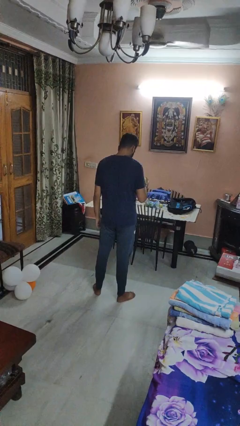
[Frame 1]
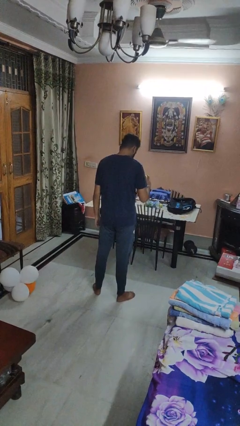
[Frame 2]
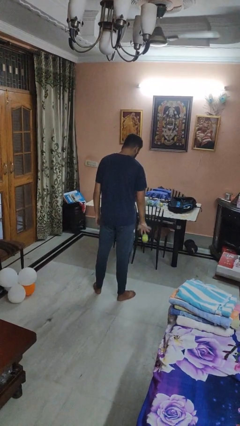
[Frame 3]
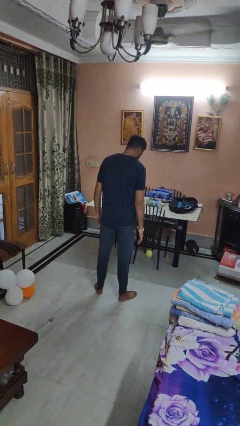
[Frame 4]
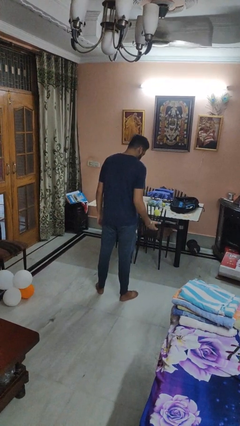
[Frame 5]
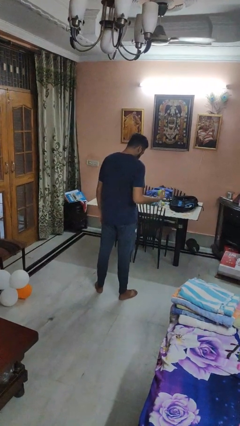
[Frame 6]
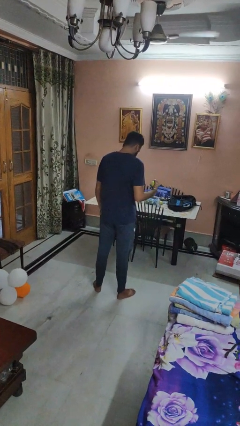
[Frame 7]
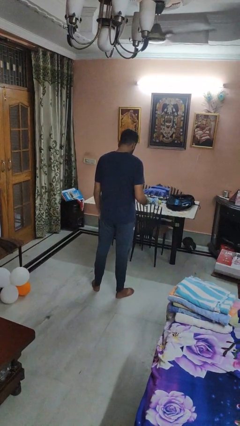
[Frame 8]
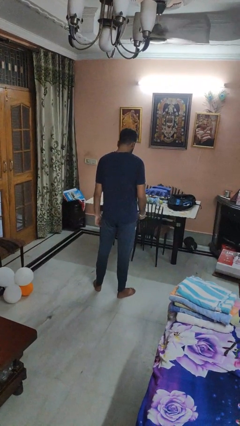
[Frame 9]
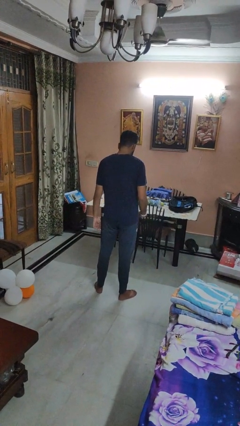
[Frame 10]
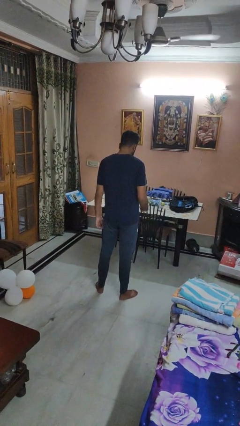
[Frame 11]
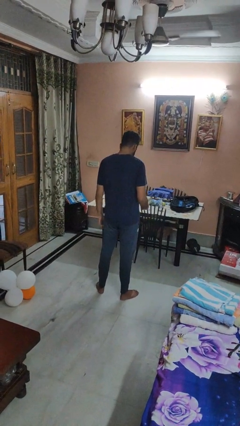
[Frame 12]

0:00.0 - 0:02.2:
person bounces ball on floor

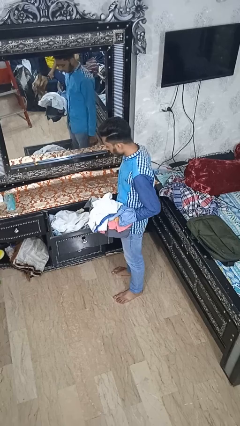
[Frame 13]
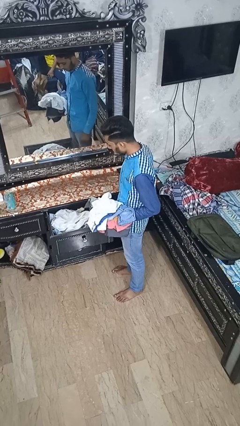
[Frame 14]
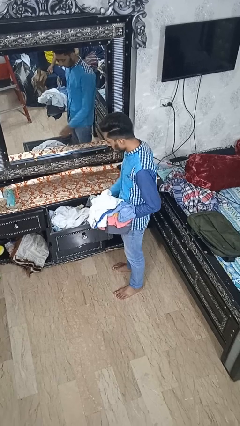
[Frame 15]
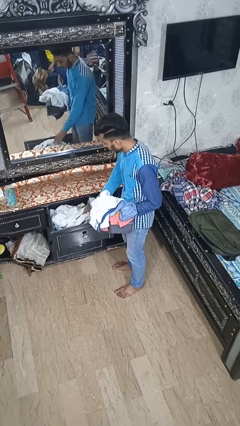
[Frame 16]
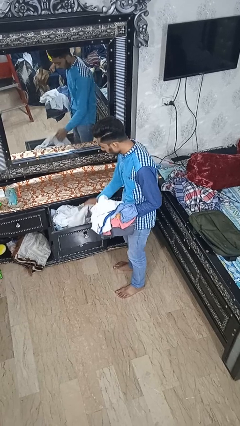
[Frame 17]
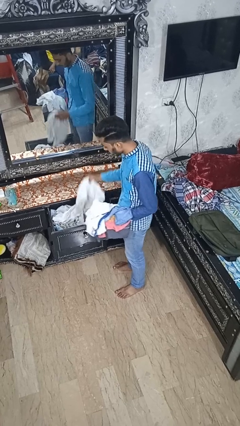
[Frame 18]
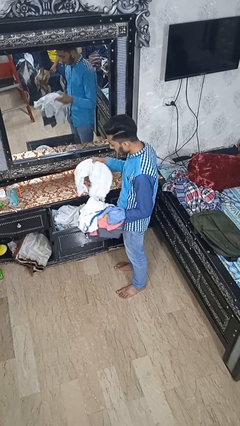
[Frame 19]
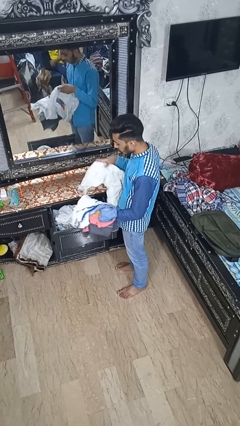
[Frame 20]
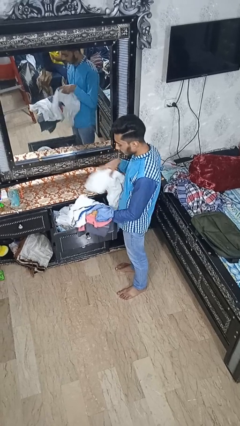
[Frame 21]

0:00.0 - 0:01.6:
person takes clothes from dresser

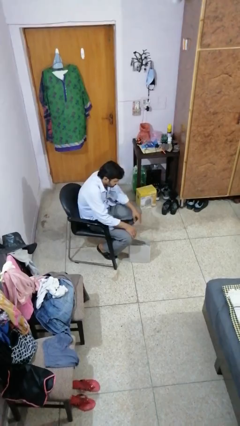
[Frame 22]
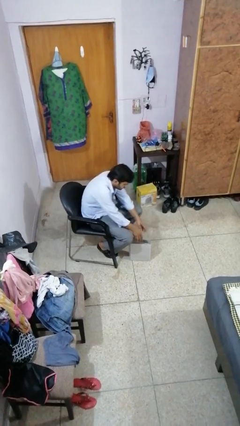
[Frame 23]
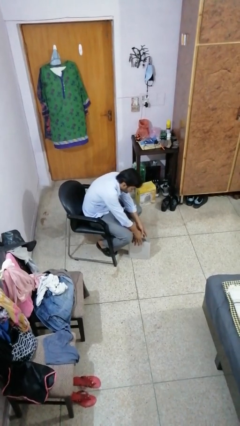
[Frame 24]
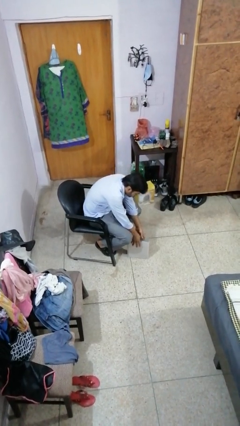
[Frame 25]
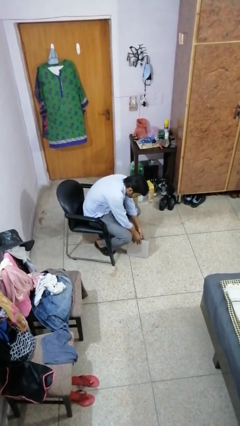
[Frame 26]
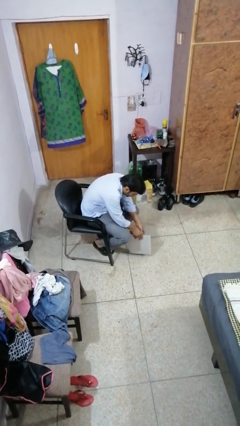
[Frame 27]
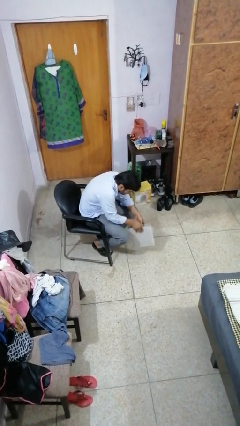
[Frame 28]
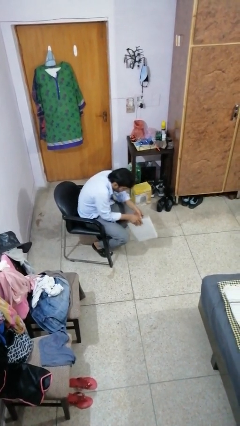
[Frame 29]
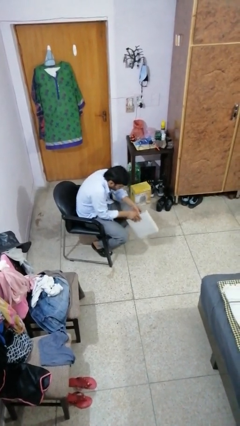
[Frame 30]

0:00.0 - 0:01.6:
person picks up object from floor

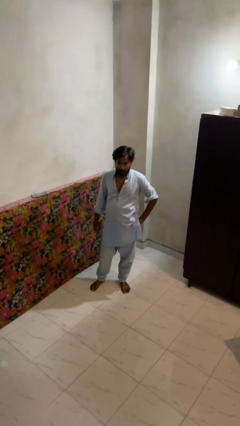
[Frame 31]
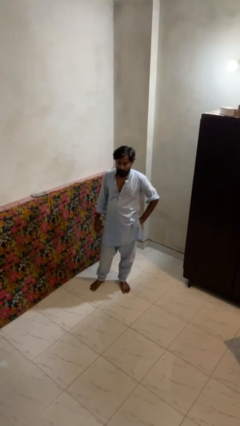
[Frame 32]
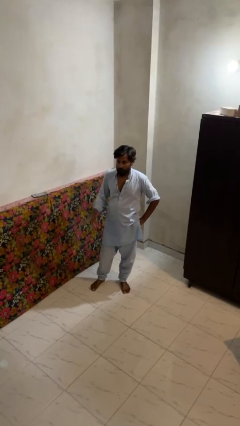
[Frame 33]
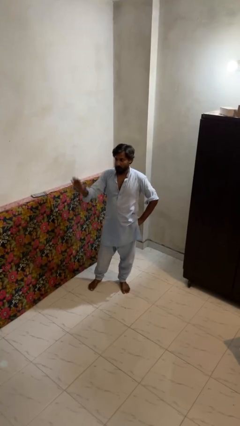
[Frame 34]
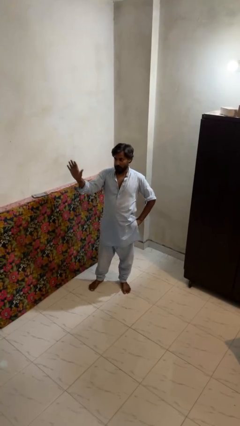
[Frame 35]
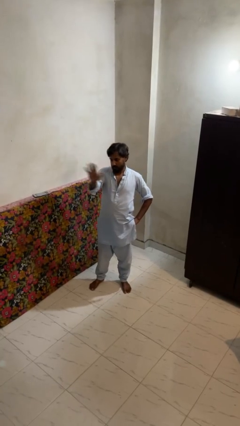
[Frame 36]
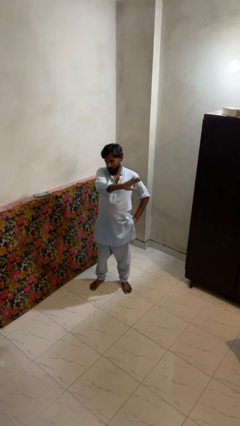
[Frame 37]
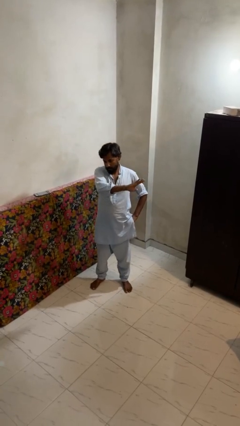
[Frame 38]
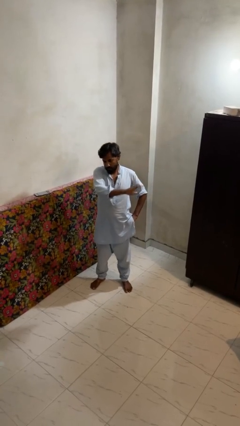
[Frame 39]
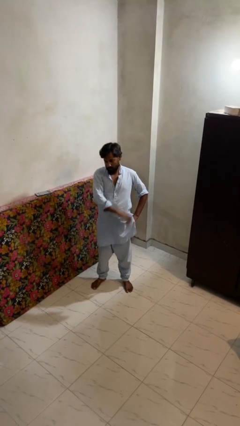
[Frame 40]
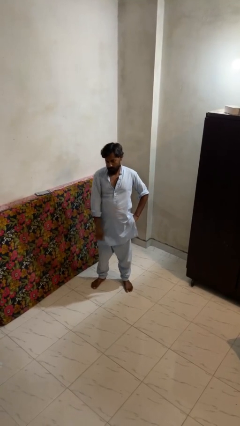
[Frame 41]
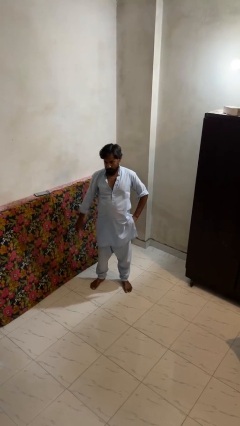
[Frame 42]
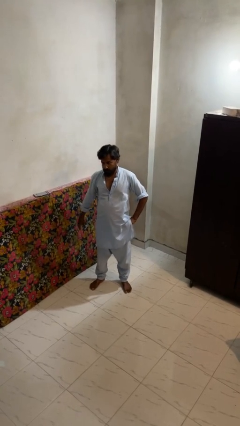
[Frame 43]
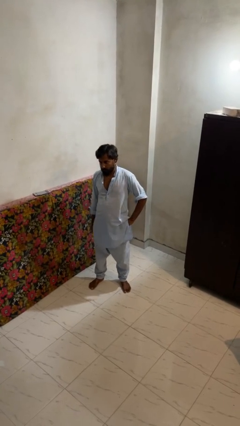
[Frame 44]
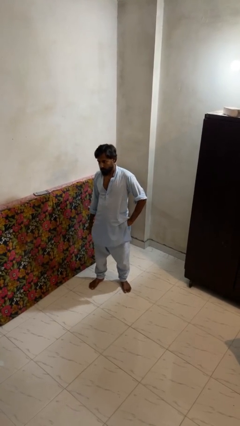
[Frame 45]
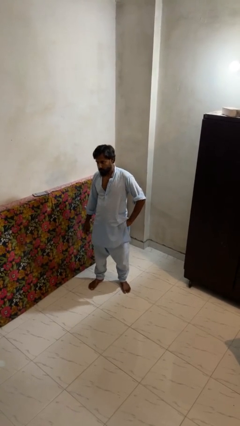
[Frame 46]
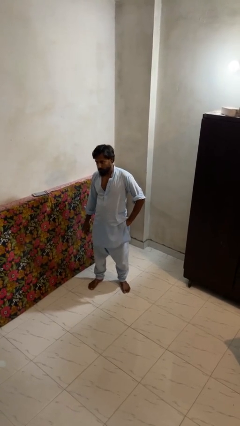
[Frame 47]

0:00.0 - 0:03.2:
person gestures swipe left

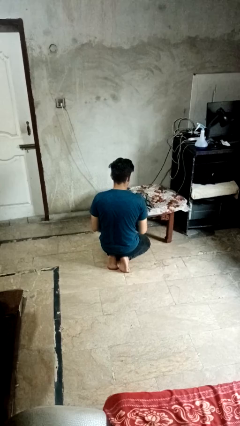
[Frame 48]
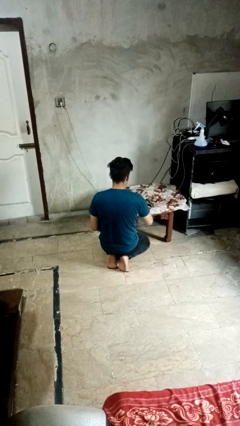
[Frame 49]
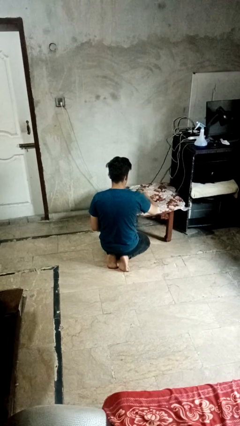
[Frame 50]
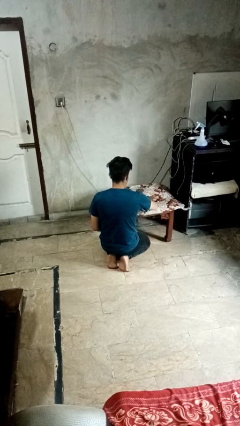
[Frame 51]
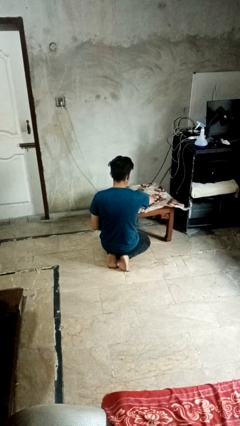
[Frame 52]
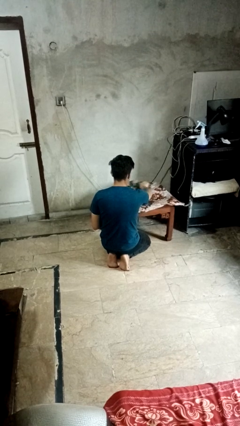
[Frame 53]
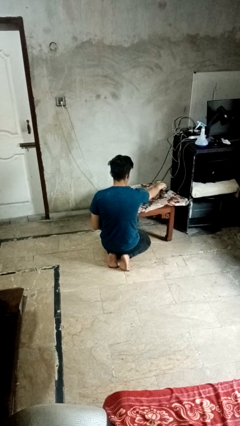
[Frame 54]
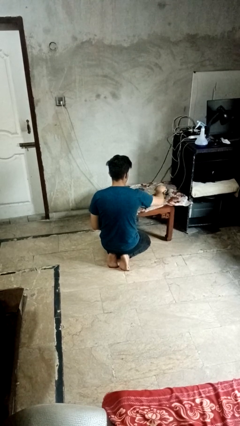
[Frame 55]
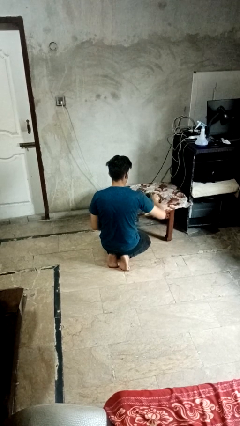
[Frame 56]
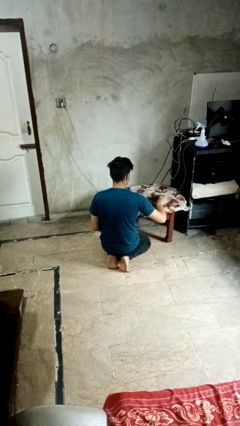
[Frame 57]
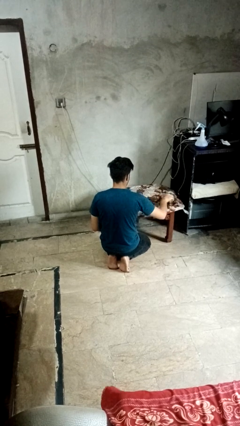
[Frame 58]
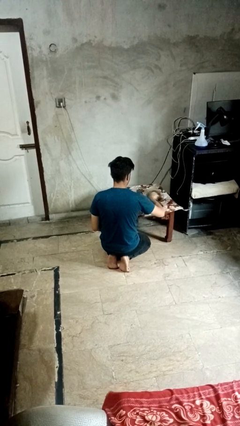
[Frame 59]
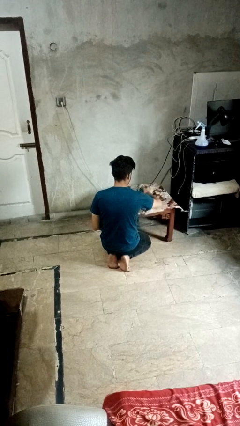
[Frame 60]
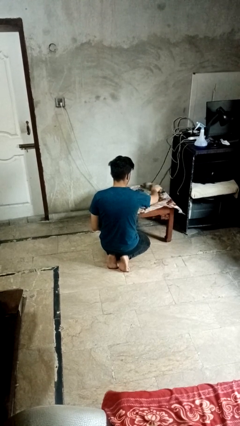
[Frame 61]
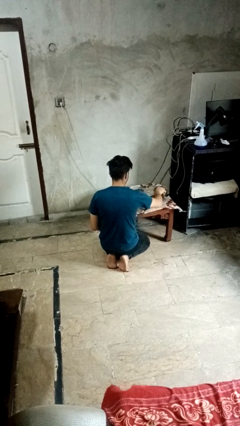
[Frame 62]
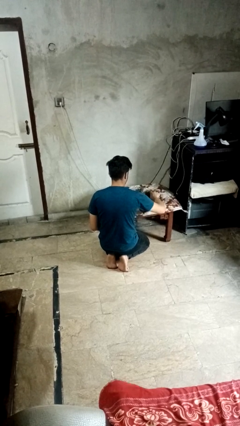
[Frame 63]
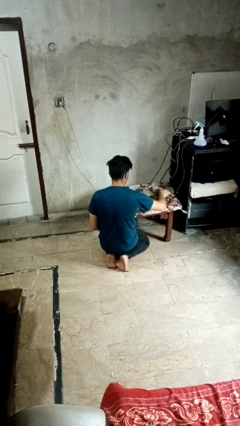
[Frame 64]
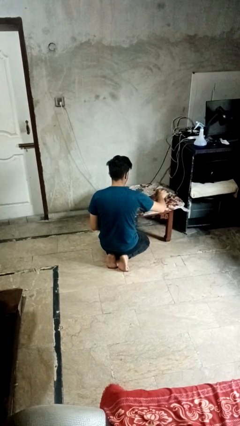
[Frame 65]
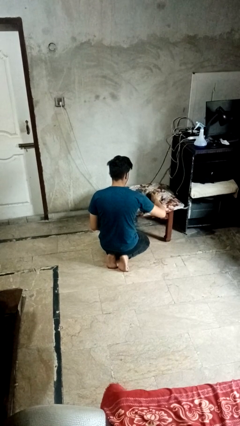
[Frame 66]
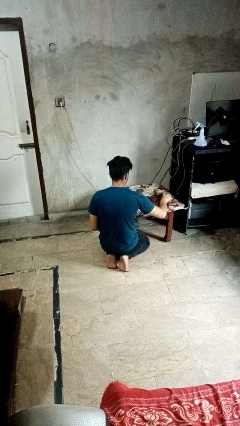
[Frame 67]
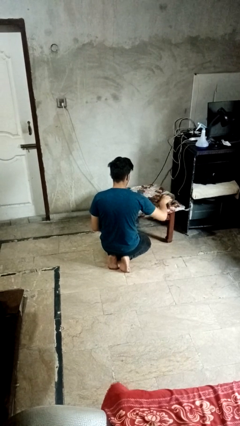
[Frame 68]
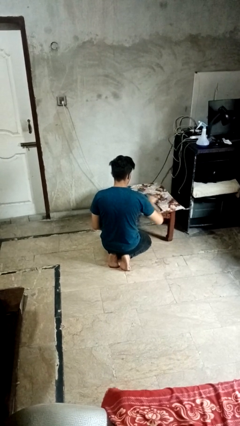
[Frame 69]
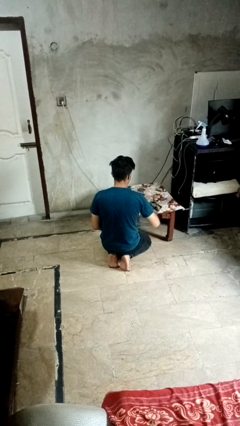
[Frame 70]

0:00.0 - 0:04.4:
person cleans table with rag

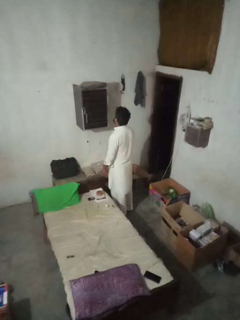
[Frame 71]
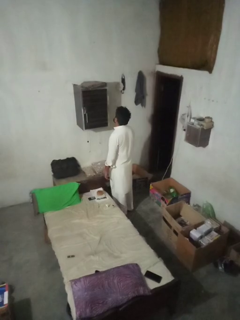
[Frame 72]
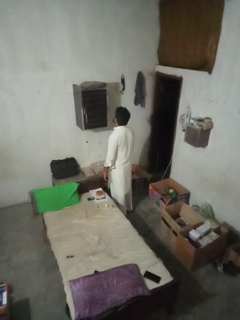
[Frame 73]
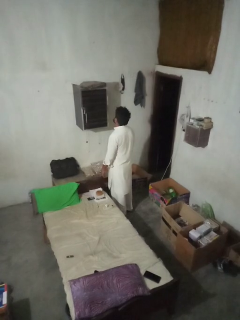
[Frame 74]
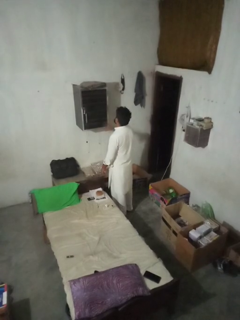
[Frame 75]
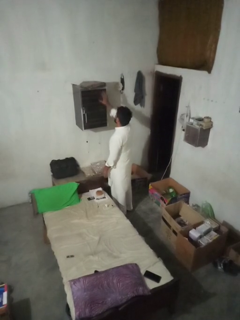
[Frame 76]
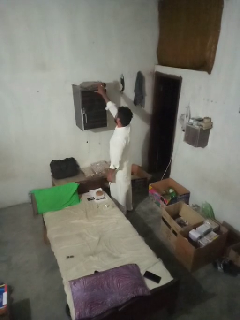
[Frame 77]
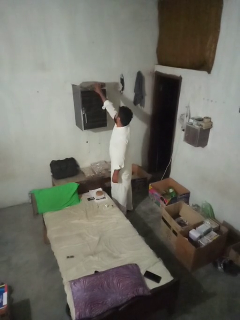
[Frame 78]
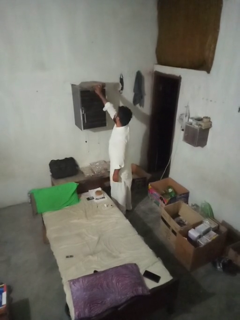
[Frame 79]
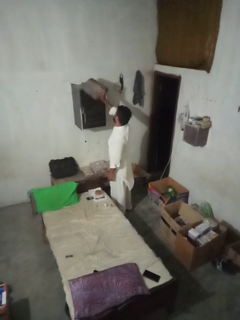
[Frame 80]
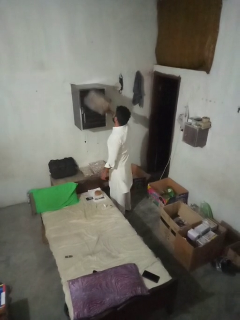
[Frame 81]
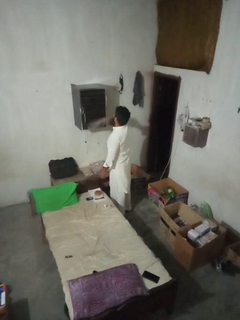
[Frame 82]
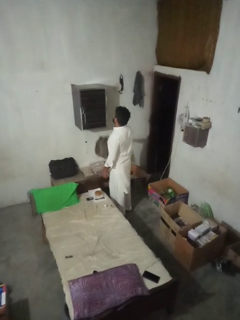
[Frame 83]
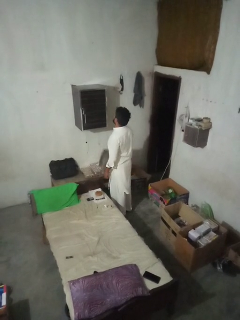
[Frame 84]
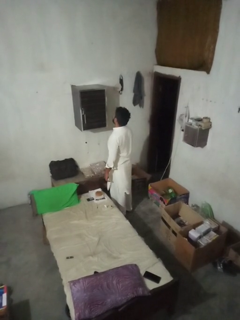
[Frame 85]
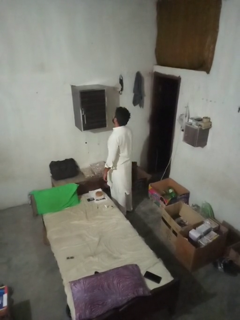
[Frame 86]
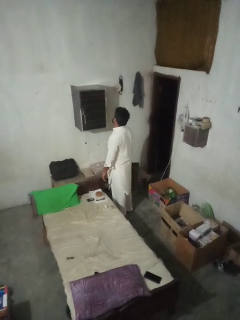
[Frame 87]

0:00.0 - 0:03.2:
person picks up object from shelf

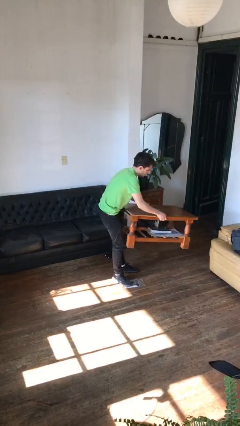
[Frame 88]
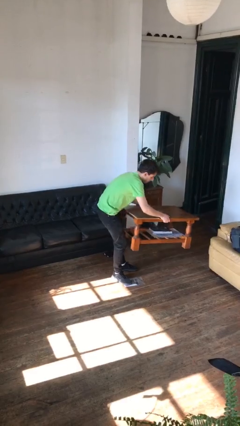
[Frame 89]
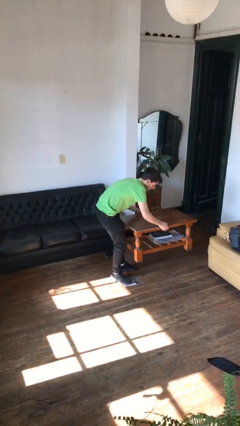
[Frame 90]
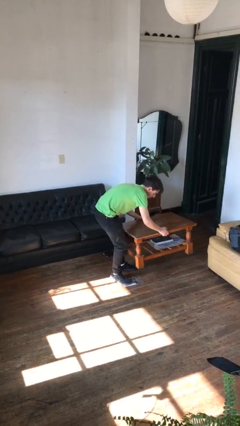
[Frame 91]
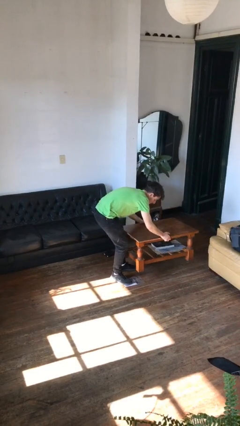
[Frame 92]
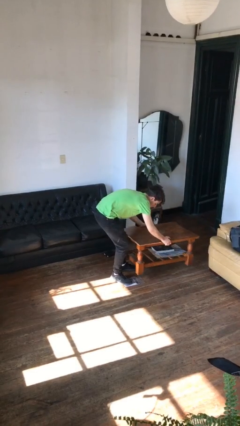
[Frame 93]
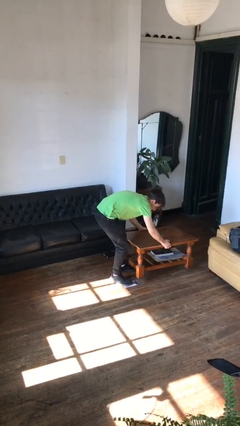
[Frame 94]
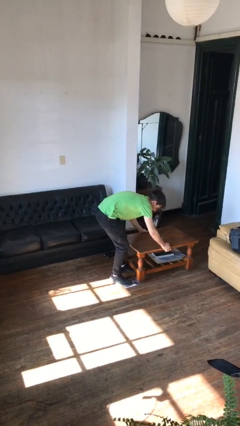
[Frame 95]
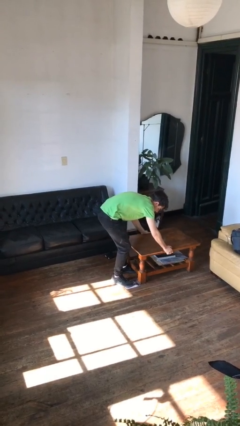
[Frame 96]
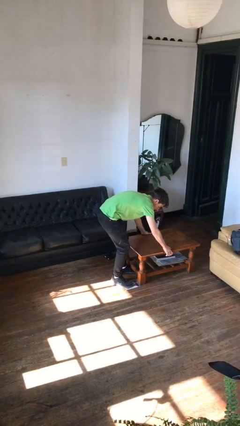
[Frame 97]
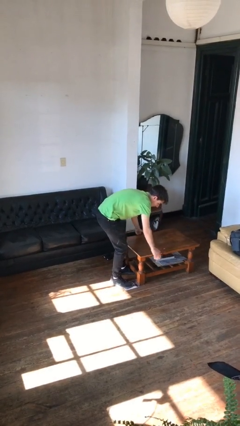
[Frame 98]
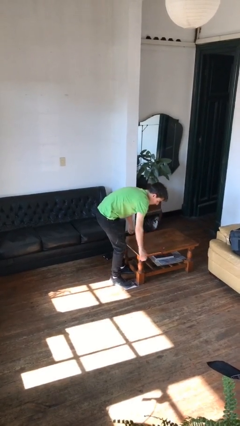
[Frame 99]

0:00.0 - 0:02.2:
person puts down object on floor
